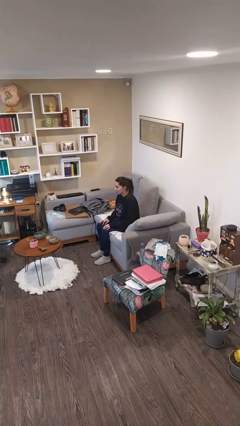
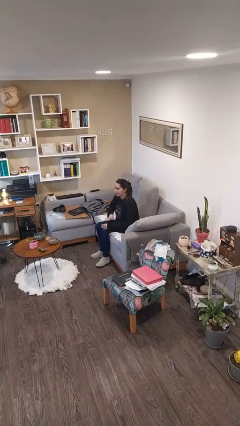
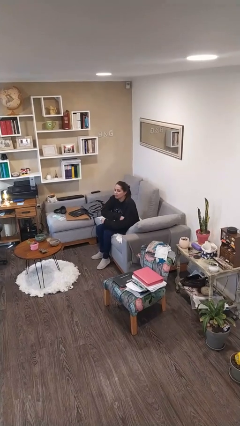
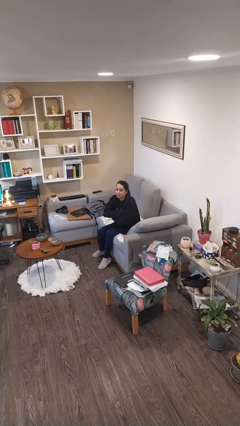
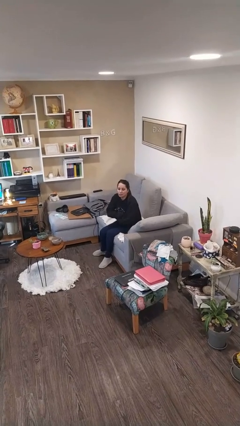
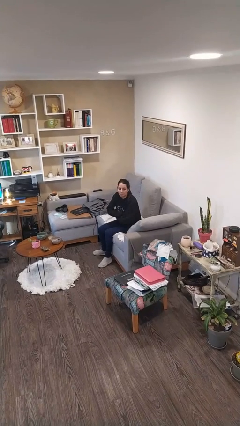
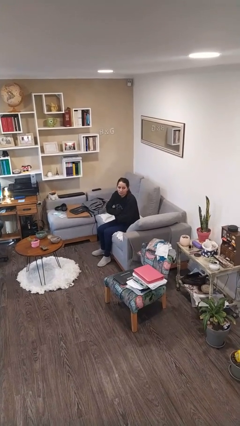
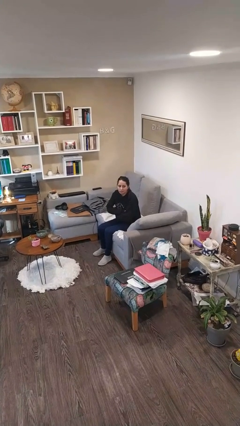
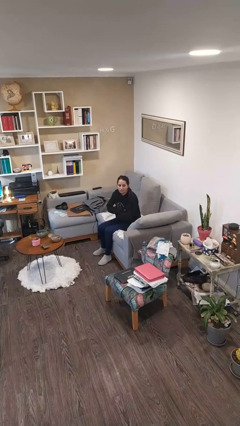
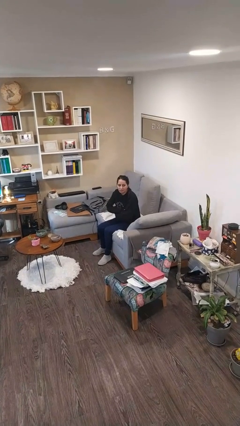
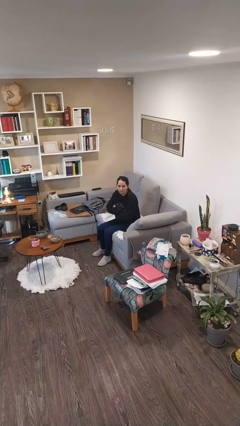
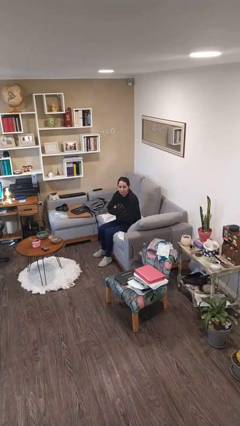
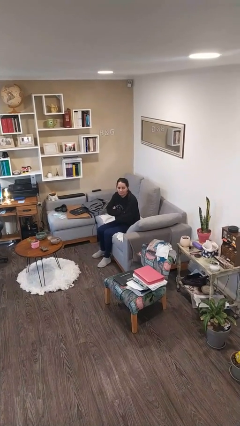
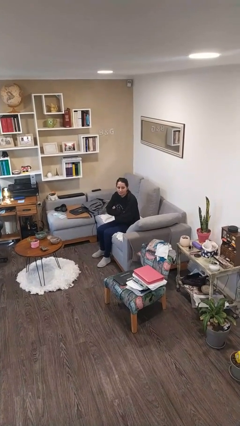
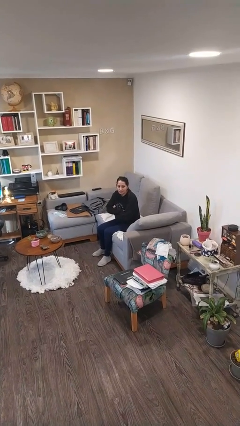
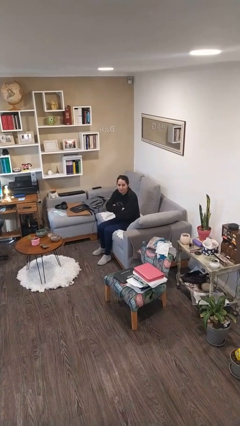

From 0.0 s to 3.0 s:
person crosses arms

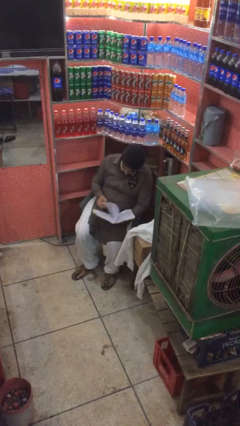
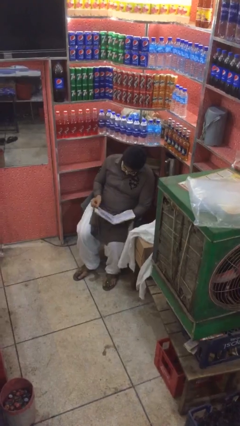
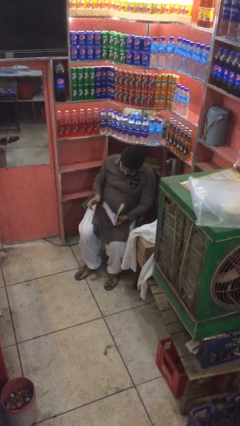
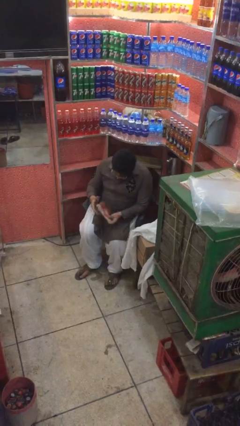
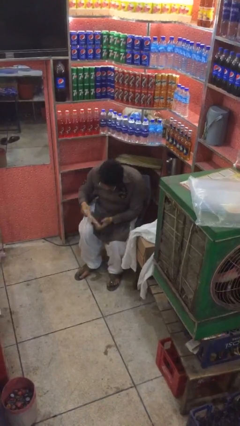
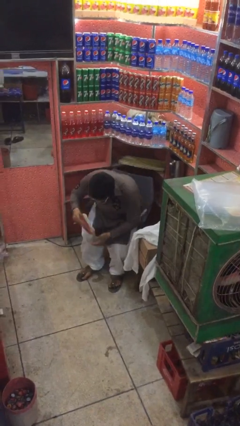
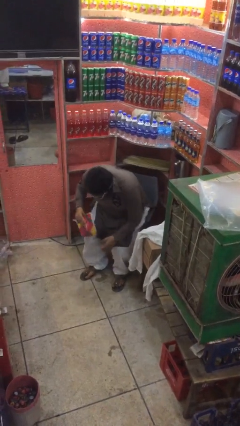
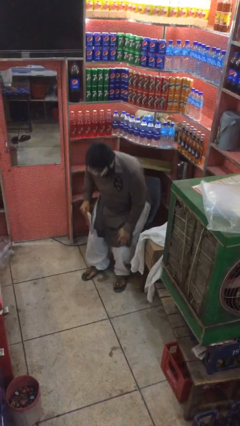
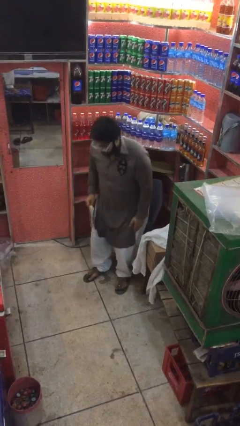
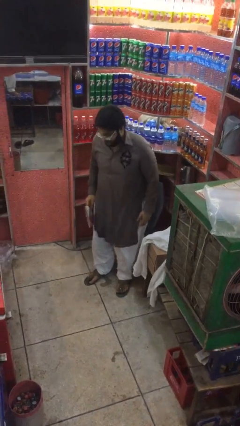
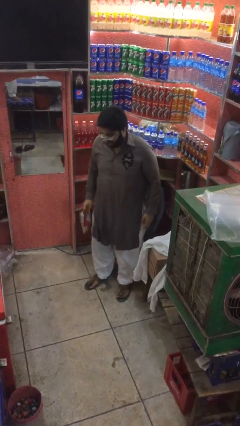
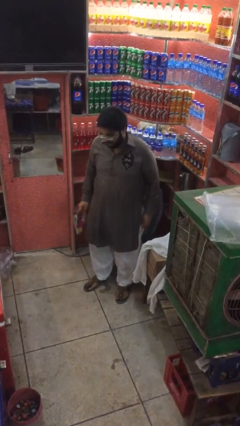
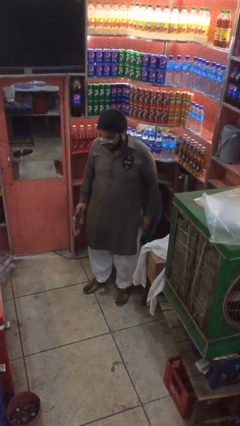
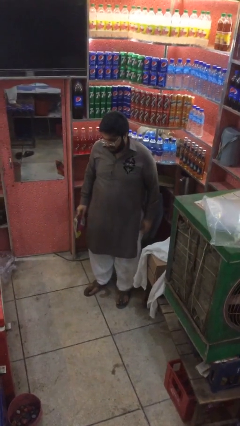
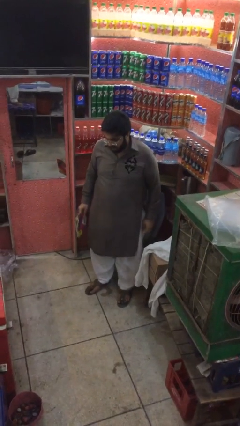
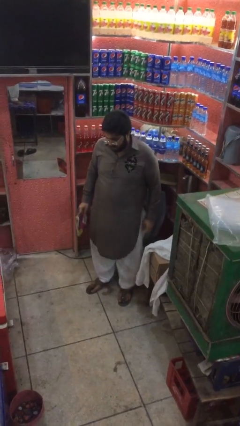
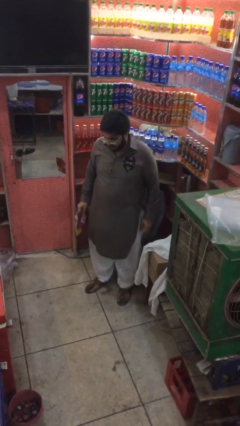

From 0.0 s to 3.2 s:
person stands up

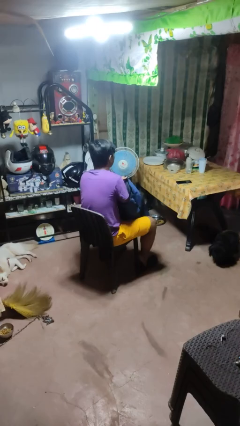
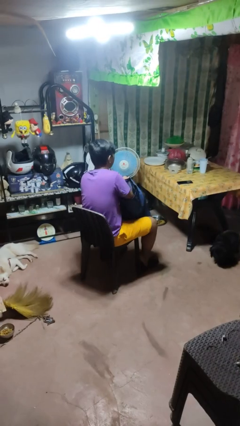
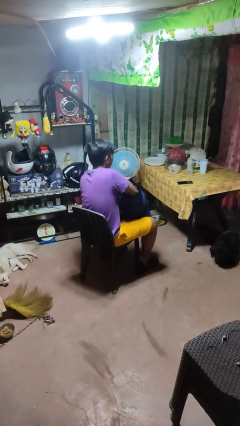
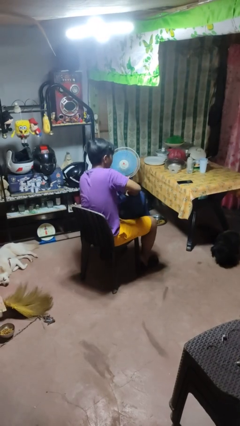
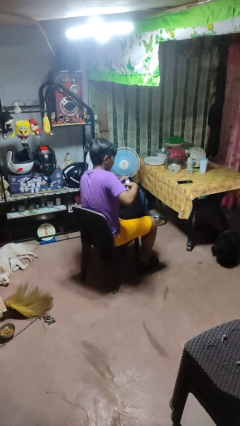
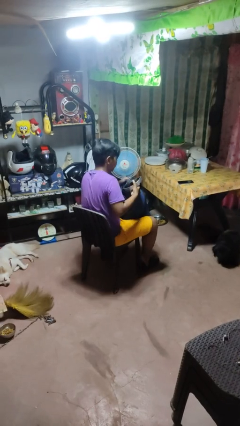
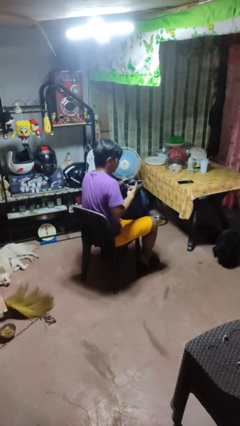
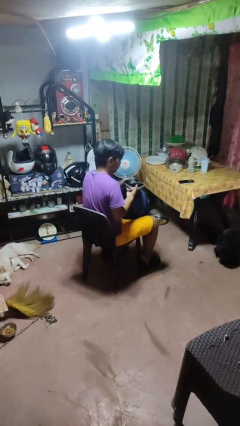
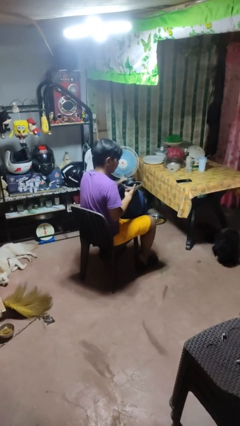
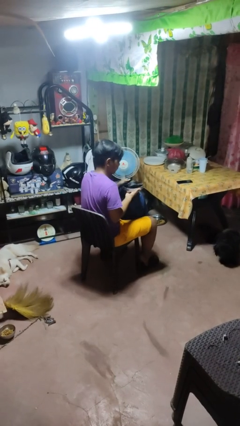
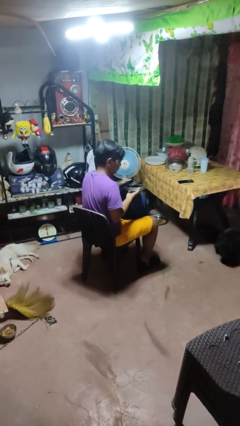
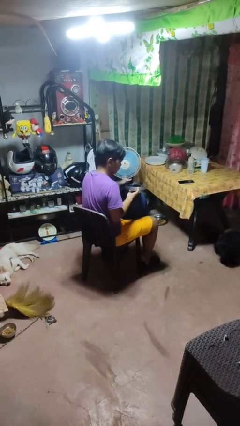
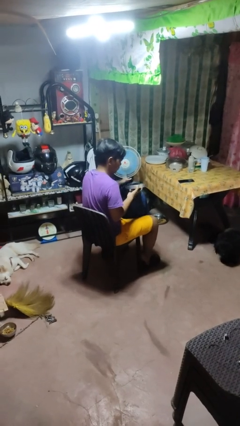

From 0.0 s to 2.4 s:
person takes object from backpack

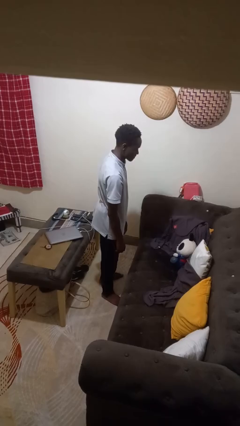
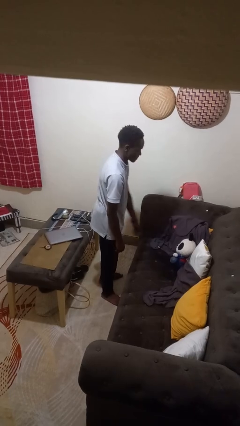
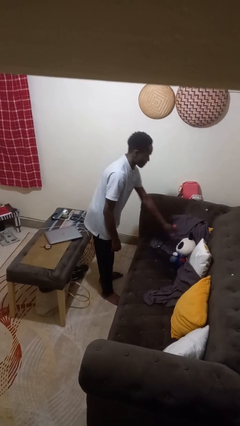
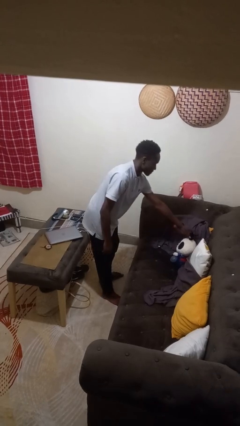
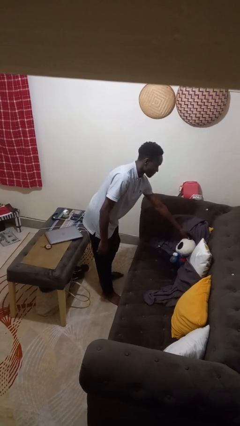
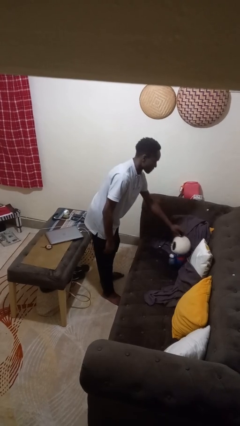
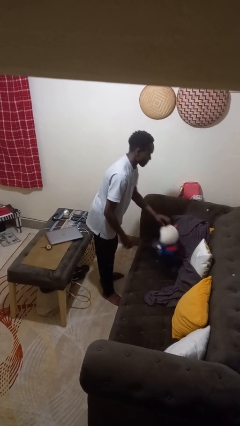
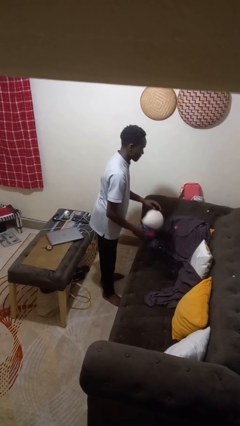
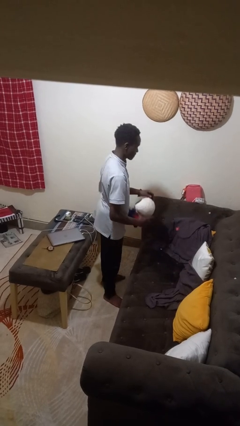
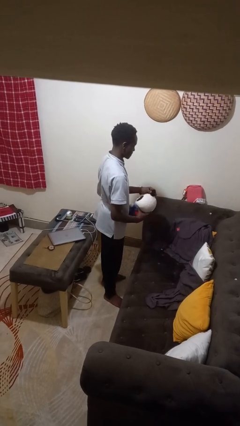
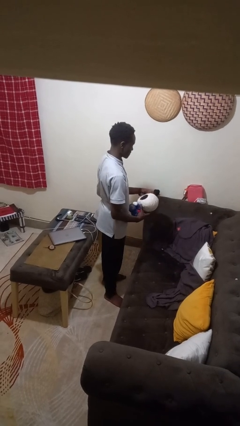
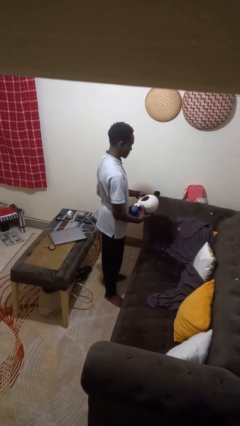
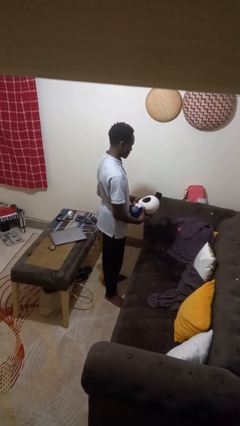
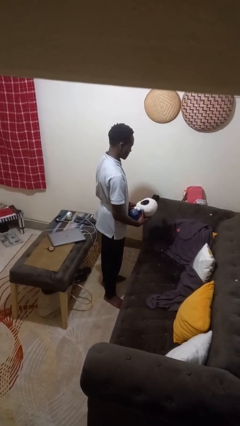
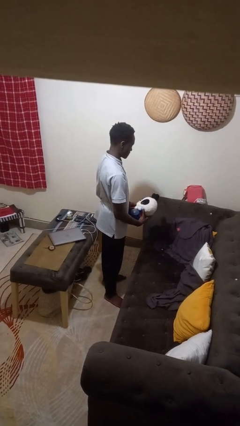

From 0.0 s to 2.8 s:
person picks up object from couch

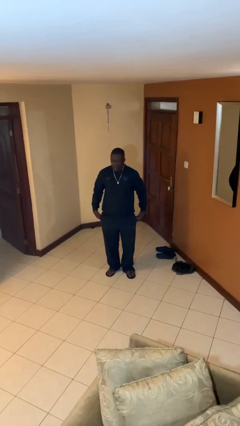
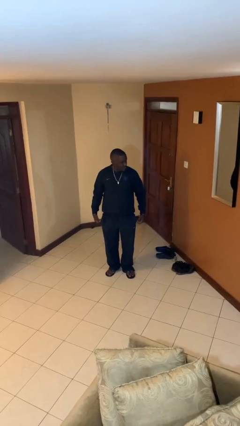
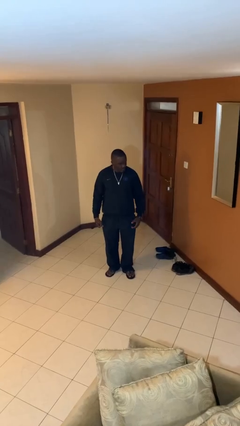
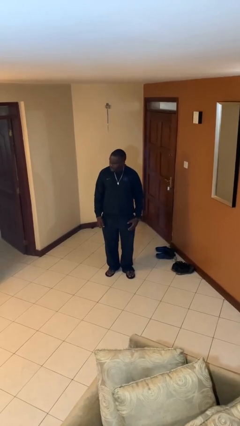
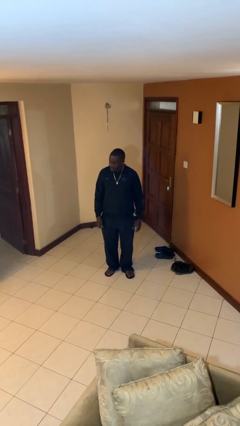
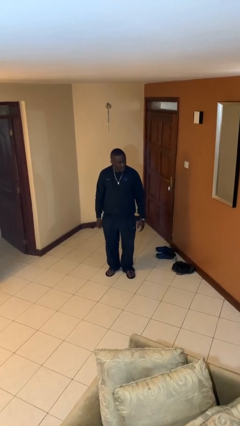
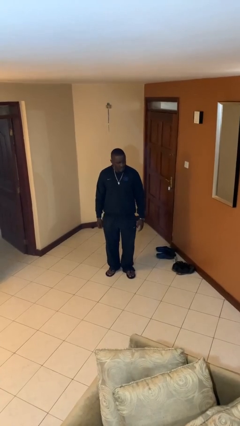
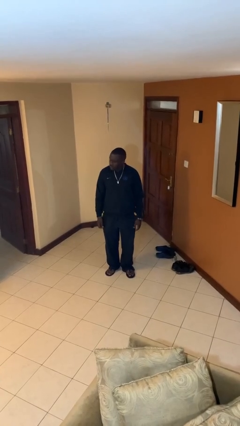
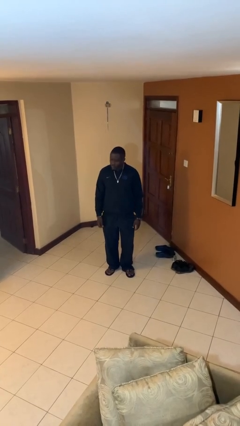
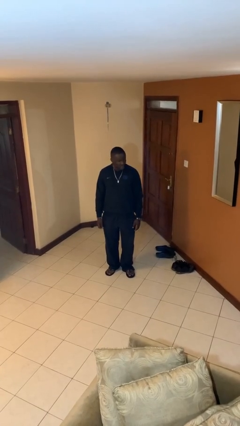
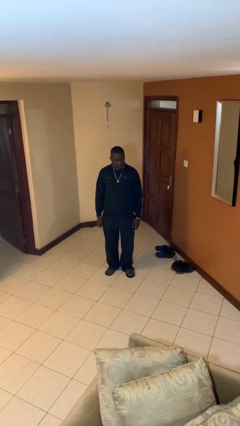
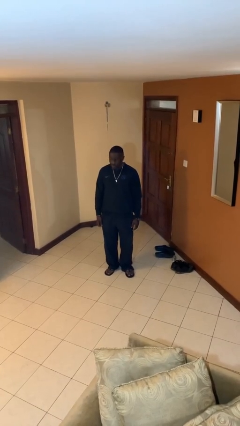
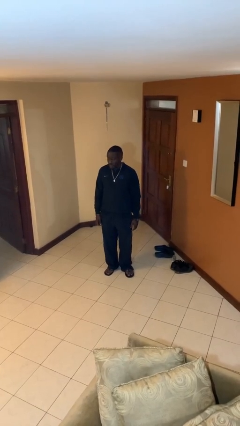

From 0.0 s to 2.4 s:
person shakes head

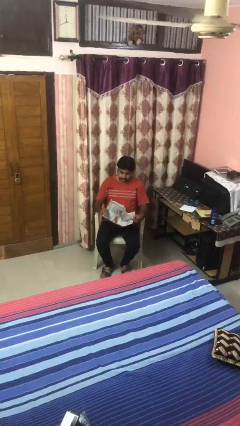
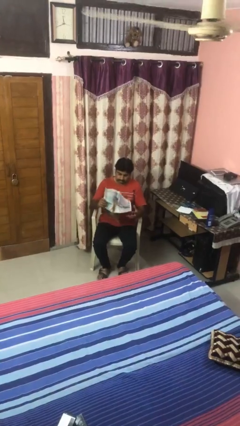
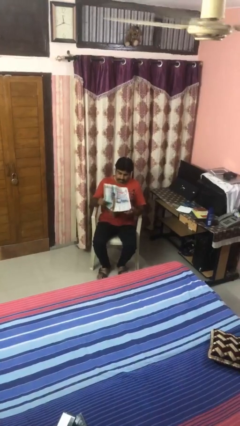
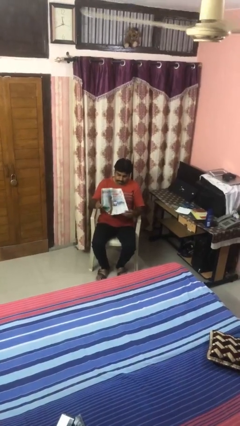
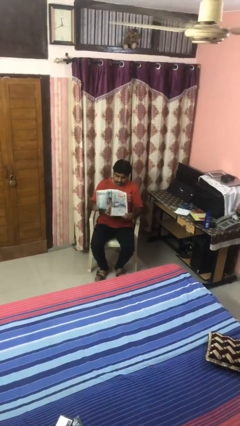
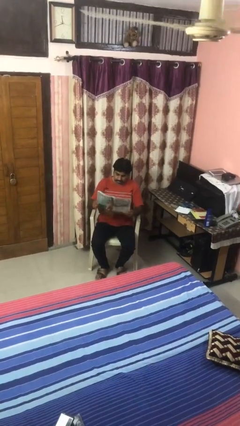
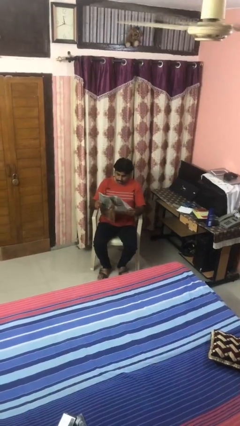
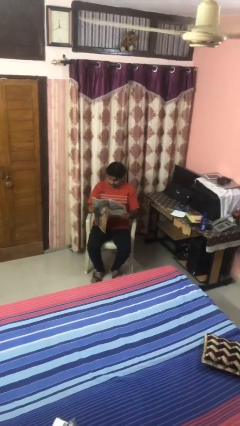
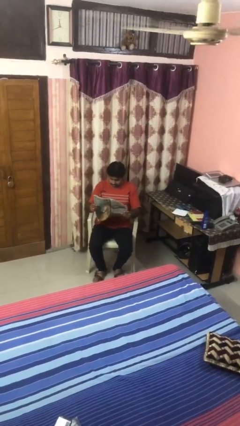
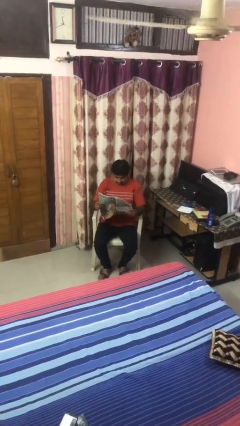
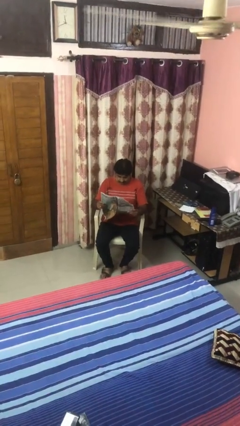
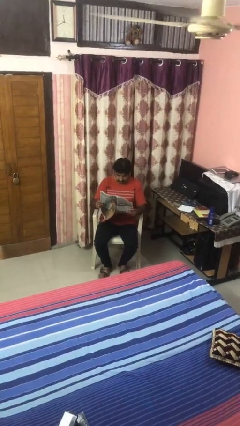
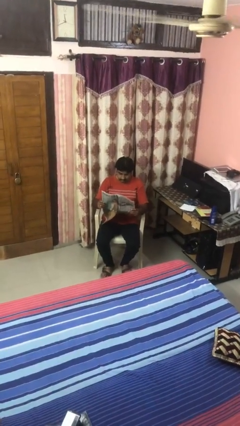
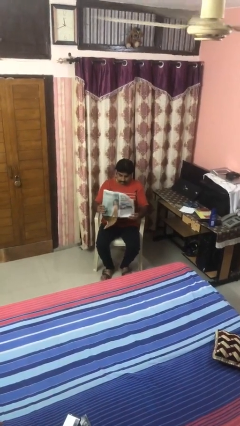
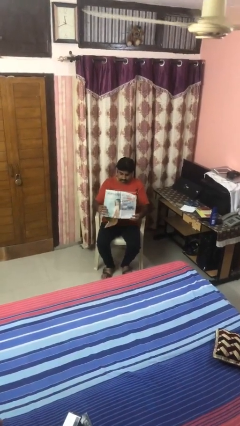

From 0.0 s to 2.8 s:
person reads newspaper

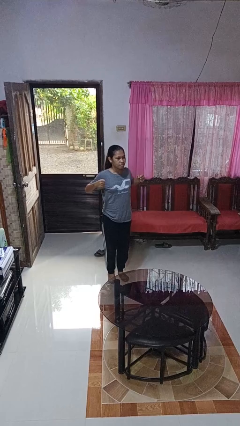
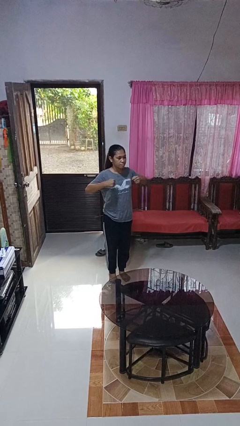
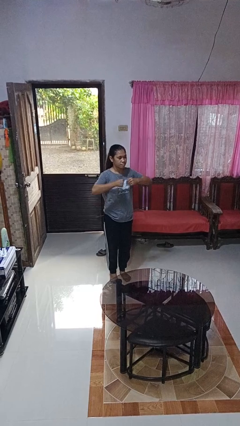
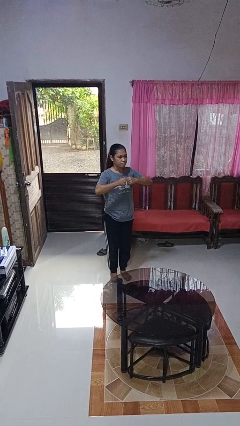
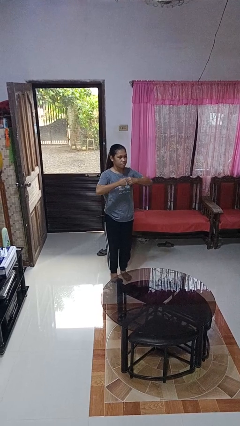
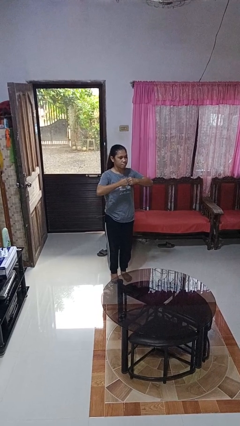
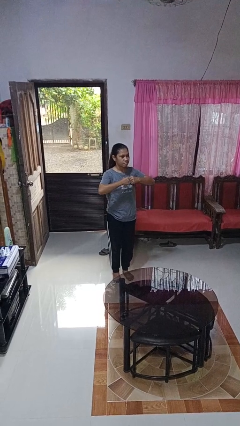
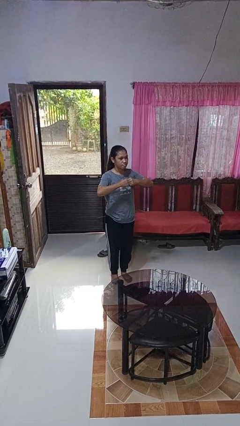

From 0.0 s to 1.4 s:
person gestures zoom out
